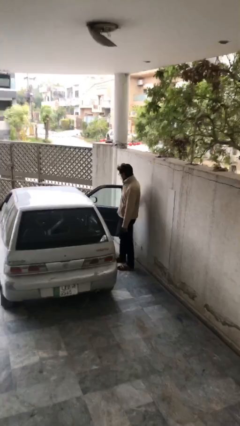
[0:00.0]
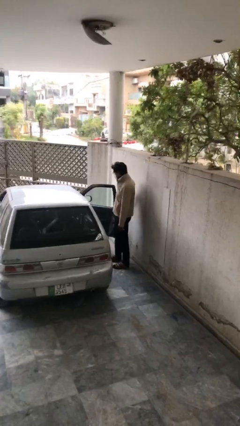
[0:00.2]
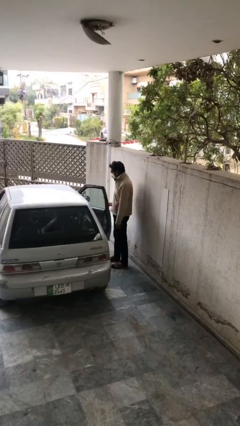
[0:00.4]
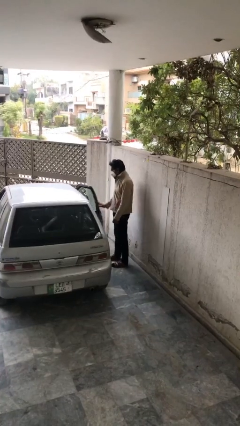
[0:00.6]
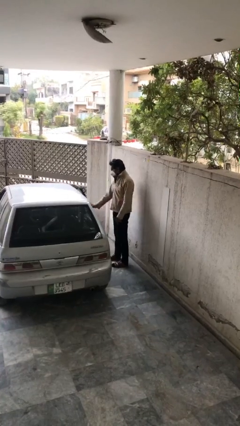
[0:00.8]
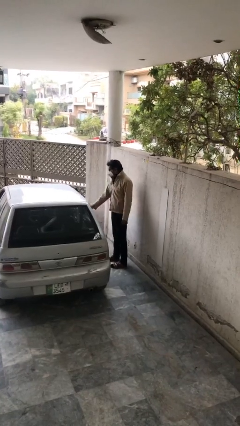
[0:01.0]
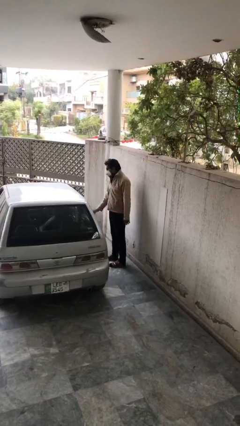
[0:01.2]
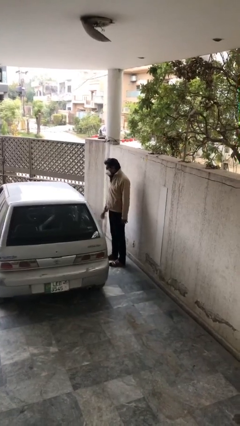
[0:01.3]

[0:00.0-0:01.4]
person closes car door

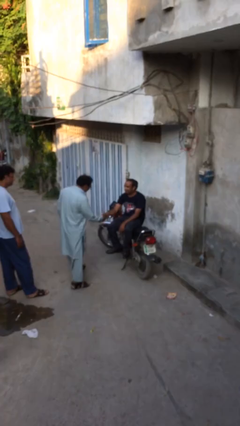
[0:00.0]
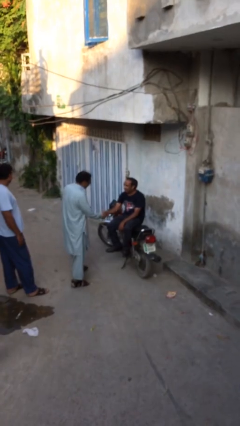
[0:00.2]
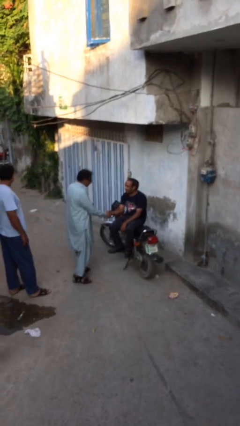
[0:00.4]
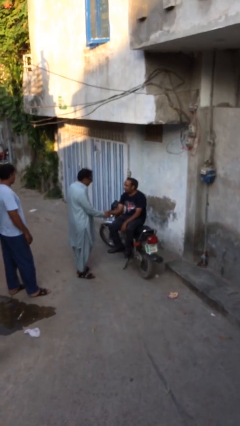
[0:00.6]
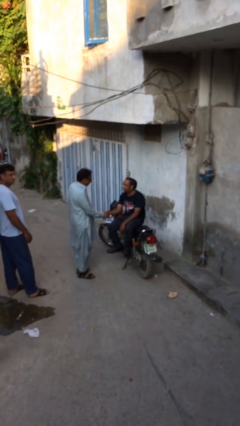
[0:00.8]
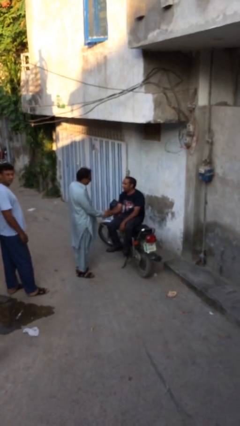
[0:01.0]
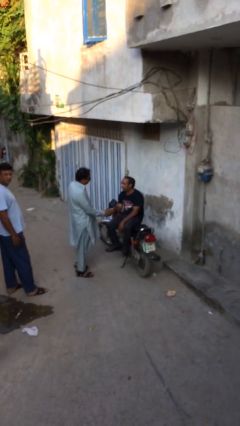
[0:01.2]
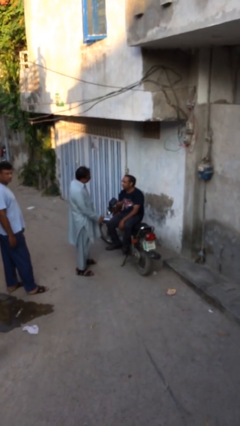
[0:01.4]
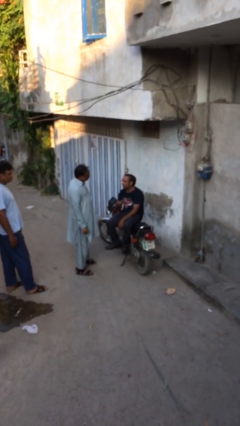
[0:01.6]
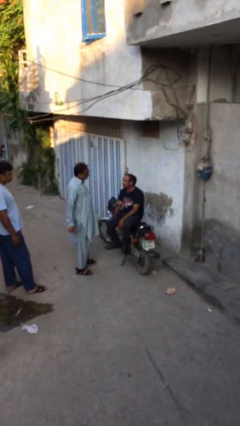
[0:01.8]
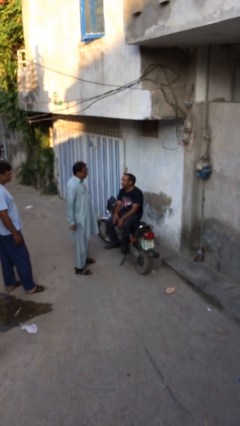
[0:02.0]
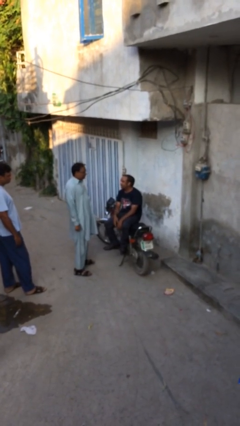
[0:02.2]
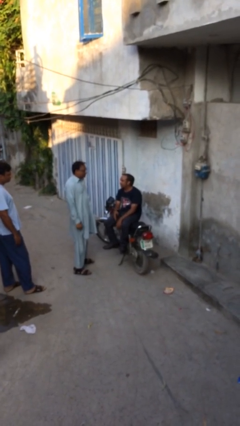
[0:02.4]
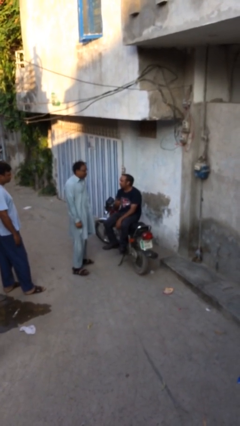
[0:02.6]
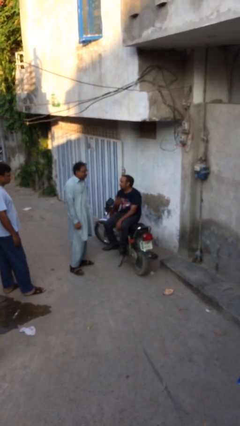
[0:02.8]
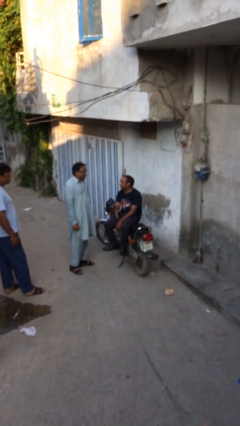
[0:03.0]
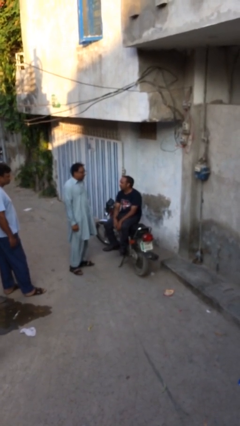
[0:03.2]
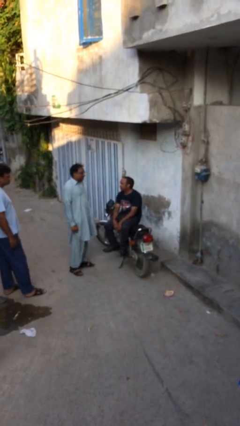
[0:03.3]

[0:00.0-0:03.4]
person shakes hand

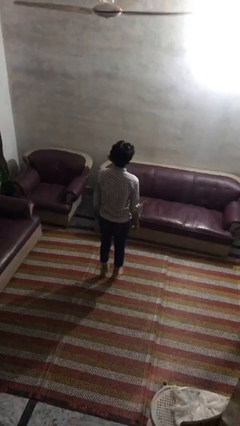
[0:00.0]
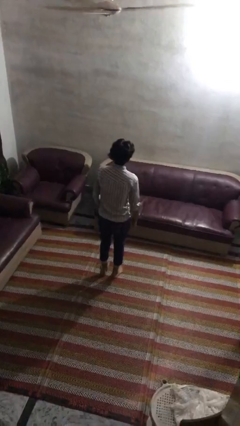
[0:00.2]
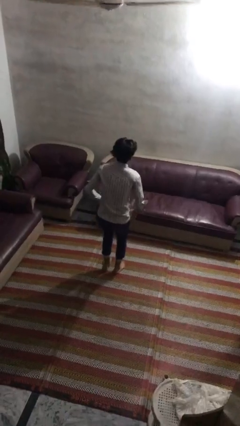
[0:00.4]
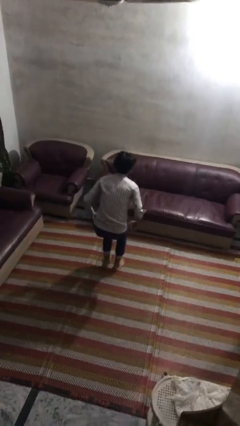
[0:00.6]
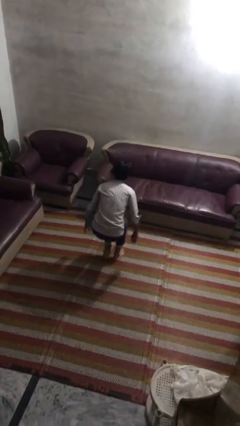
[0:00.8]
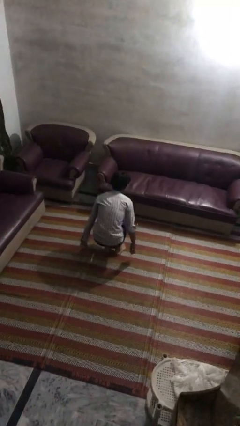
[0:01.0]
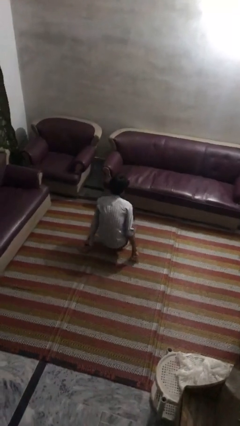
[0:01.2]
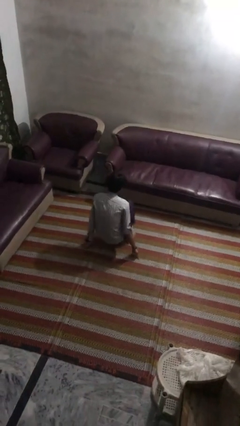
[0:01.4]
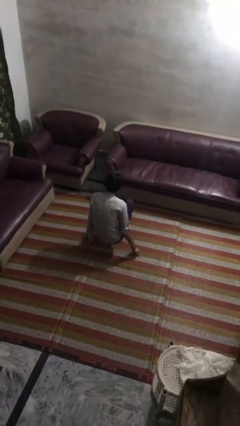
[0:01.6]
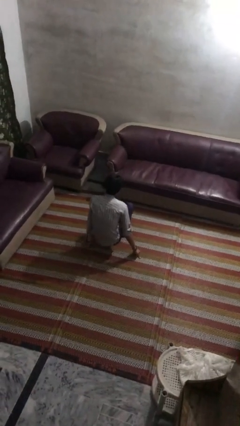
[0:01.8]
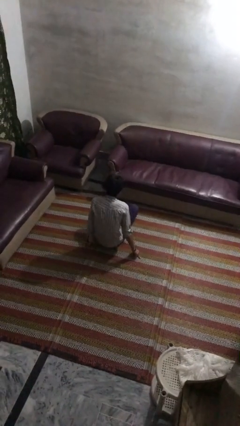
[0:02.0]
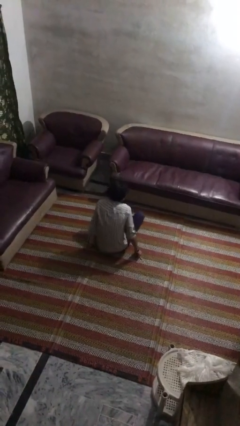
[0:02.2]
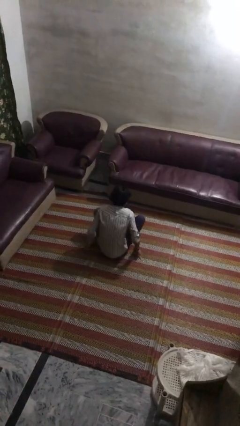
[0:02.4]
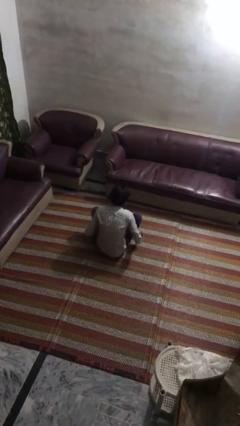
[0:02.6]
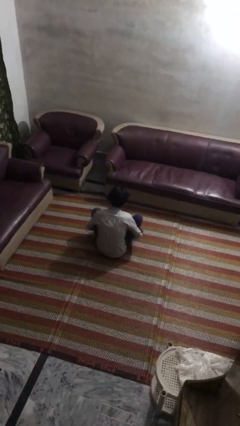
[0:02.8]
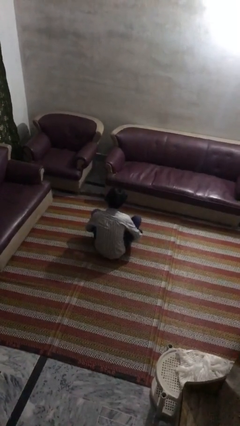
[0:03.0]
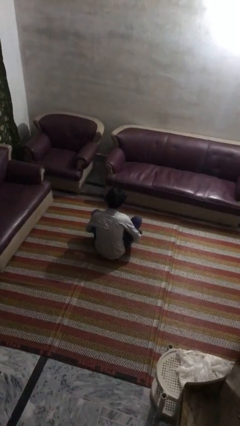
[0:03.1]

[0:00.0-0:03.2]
person sits crisscross

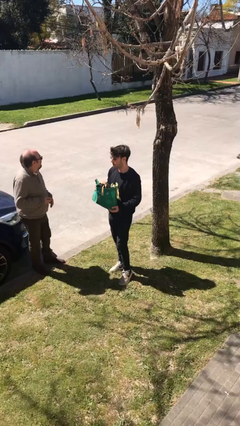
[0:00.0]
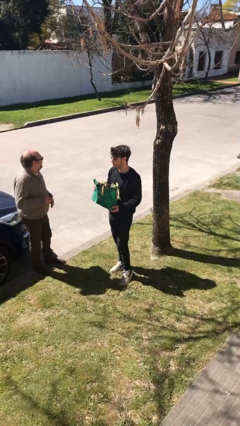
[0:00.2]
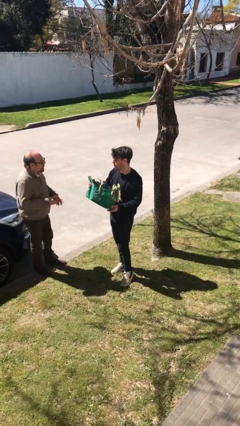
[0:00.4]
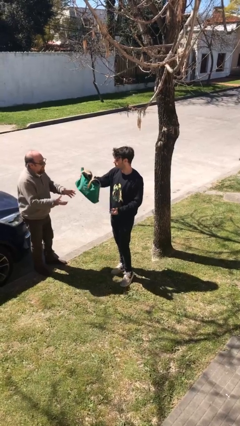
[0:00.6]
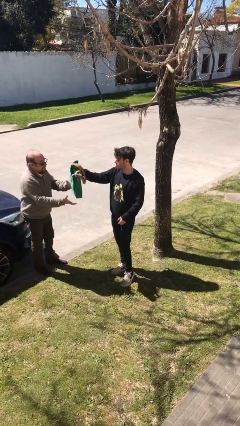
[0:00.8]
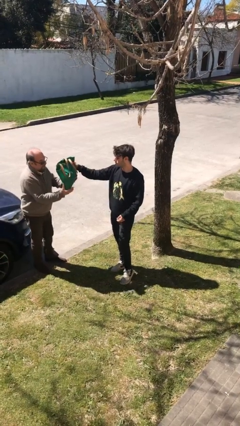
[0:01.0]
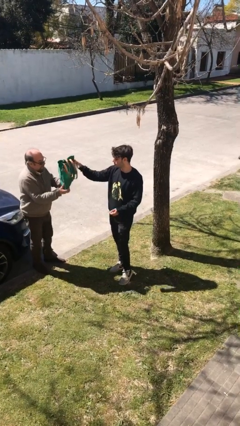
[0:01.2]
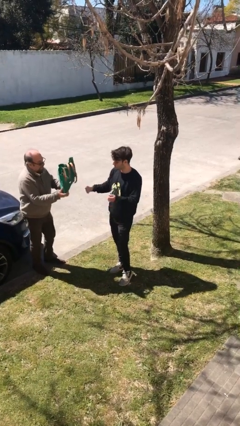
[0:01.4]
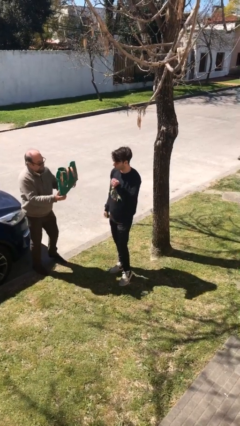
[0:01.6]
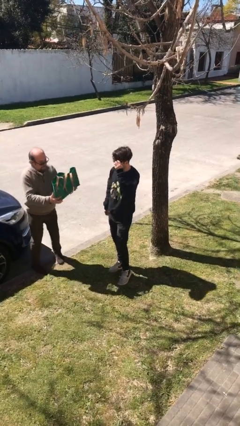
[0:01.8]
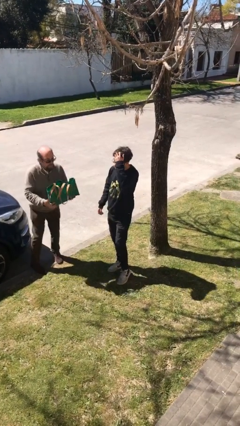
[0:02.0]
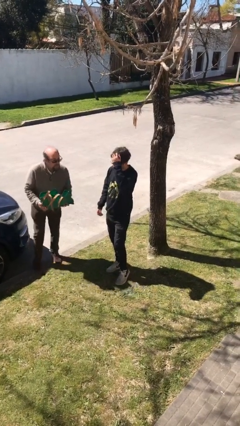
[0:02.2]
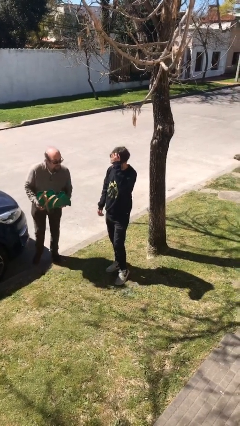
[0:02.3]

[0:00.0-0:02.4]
person transfers object to person

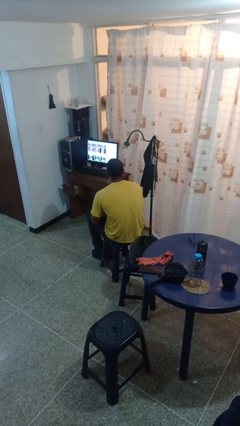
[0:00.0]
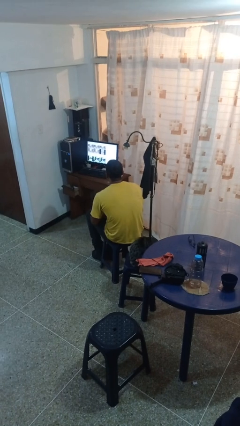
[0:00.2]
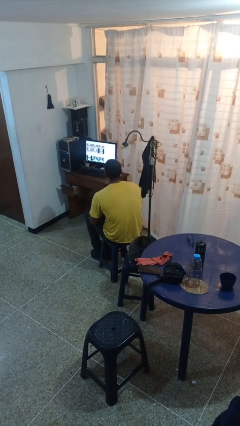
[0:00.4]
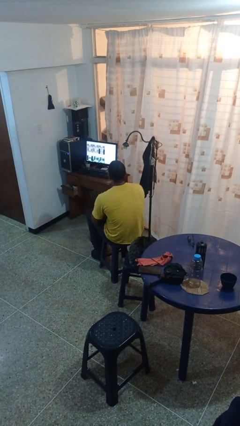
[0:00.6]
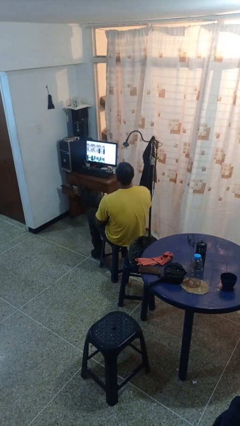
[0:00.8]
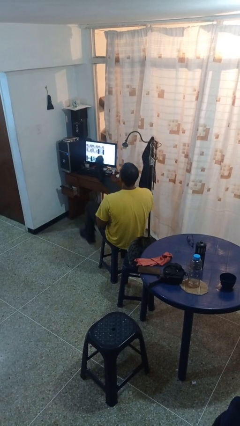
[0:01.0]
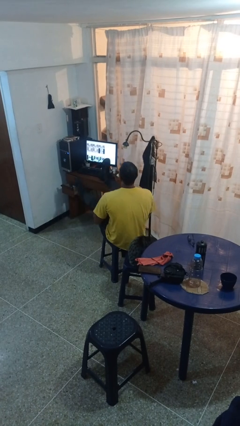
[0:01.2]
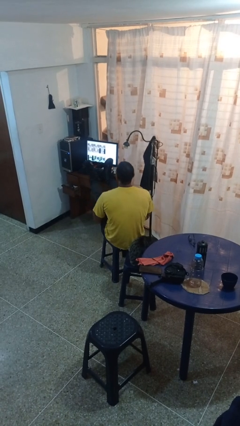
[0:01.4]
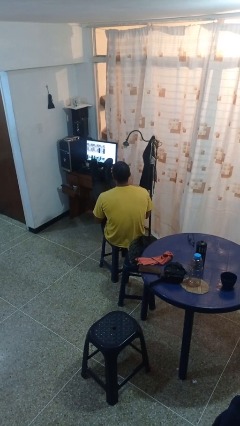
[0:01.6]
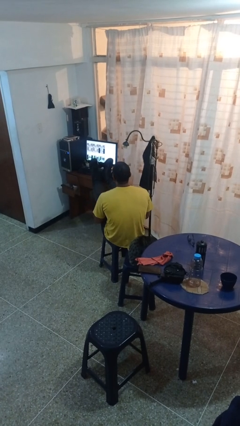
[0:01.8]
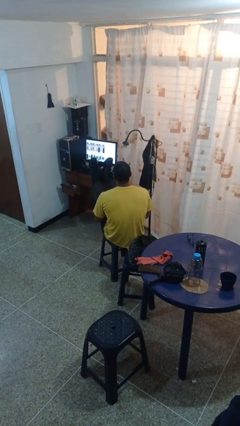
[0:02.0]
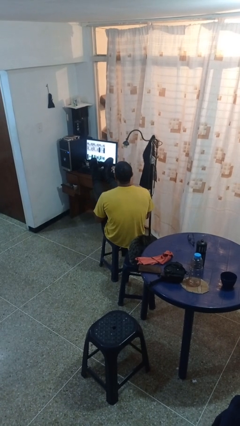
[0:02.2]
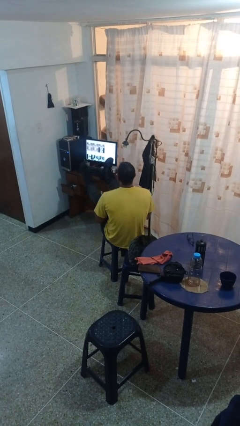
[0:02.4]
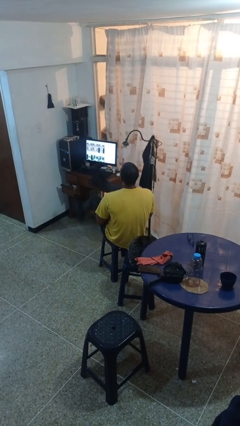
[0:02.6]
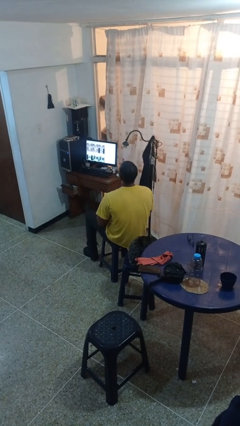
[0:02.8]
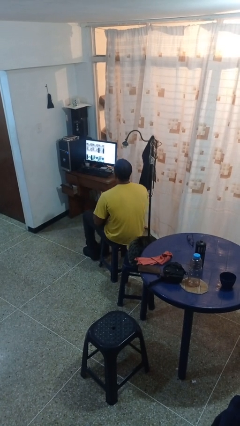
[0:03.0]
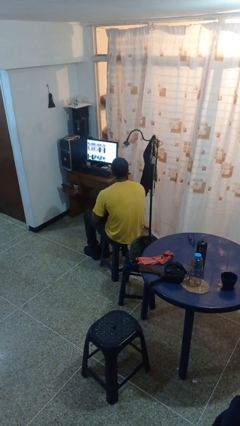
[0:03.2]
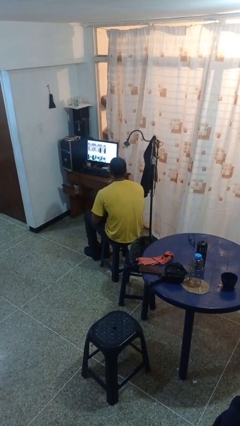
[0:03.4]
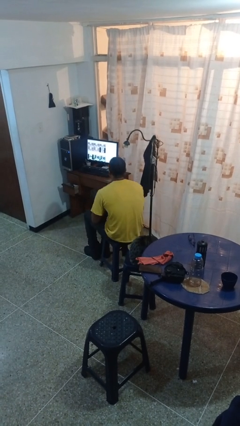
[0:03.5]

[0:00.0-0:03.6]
person puts feet up

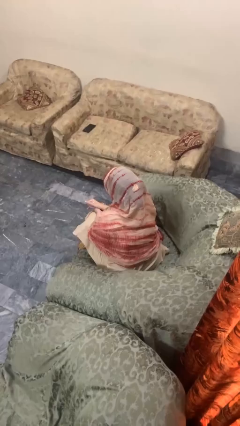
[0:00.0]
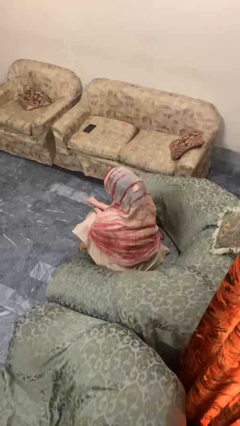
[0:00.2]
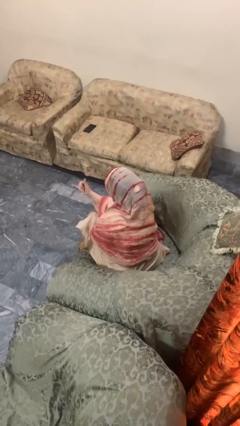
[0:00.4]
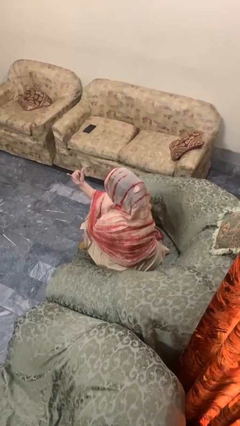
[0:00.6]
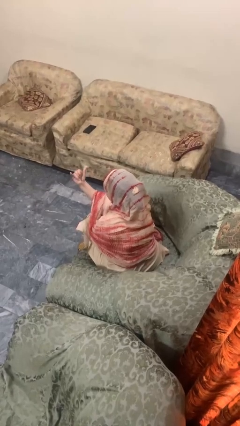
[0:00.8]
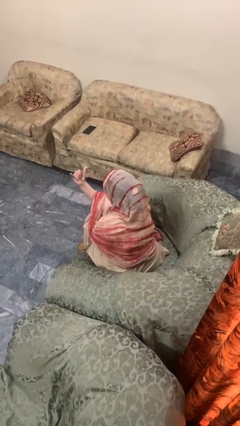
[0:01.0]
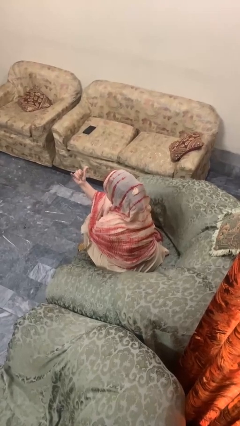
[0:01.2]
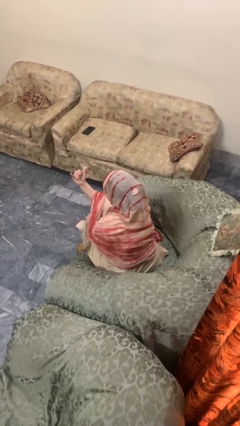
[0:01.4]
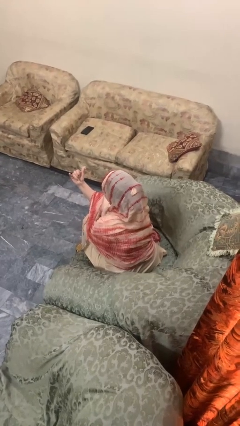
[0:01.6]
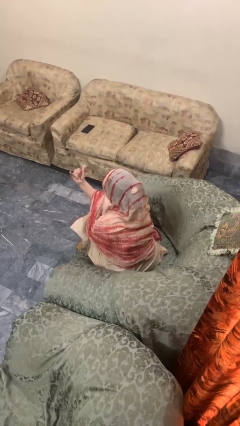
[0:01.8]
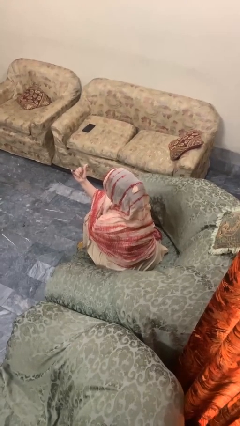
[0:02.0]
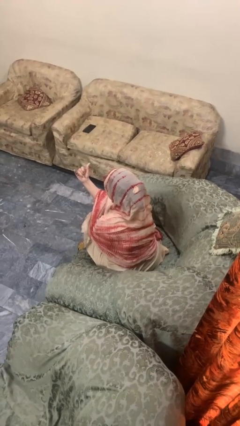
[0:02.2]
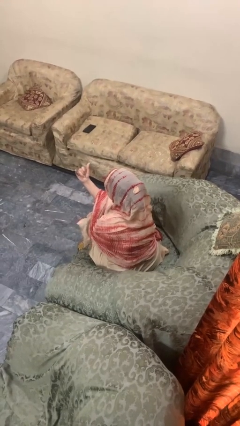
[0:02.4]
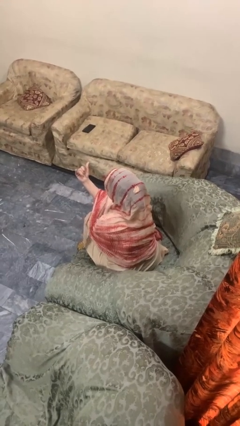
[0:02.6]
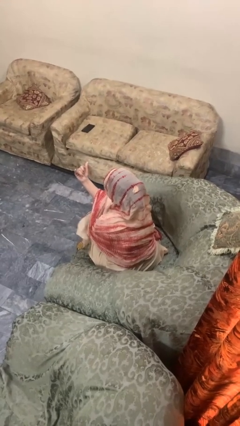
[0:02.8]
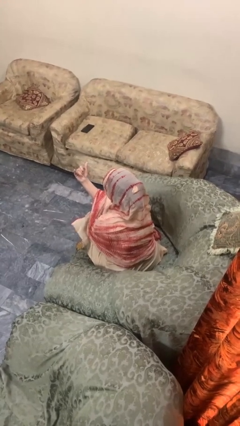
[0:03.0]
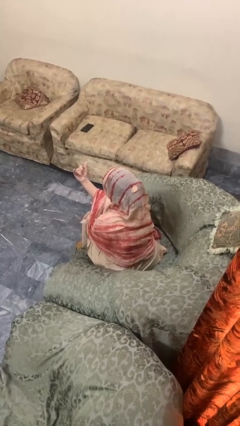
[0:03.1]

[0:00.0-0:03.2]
person gestures hang loose
